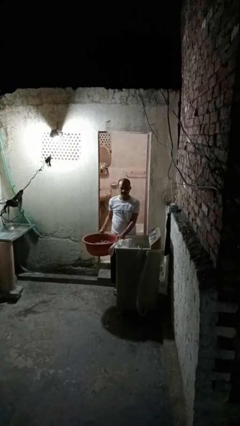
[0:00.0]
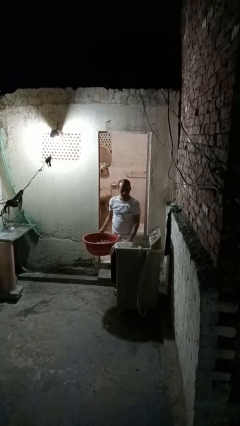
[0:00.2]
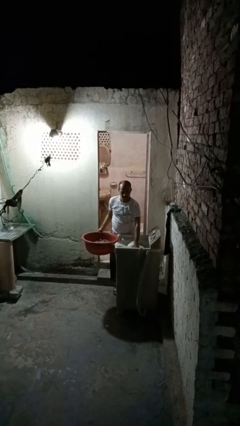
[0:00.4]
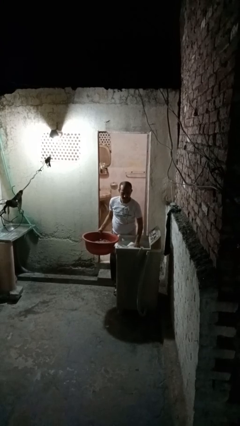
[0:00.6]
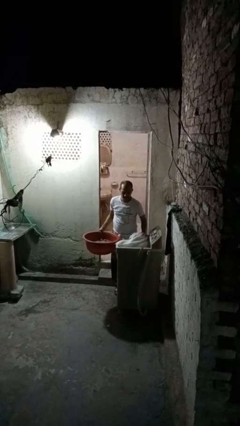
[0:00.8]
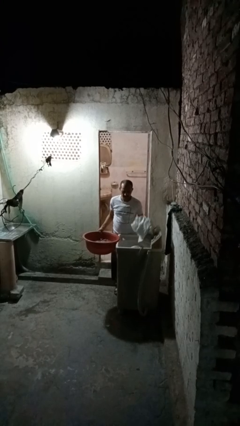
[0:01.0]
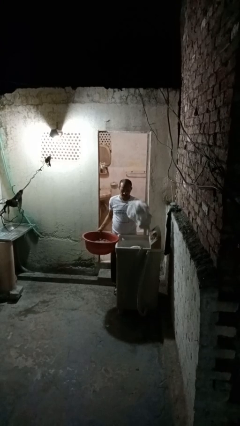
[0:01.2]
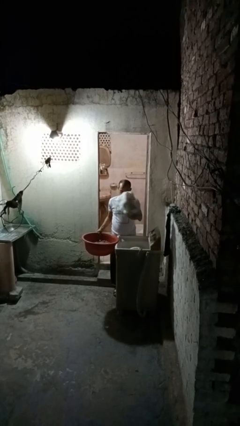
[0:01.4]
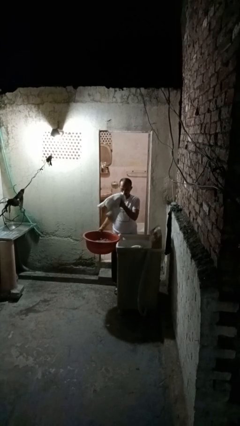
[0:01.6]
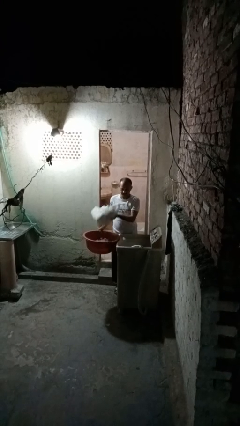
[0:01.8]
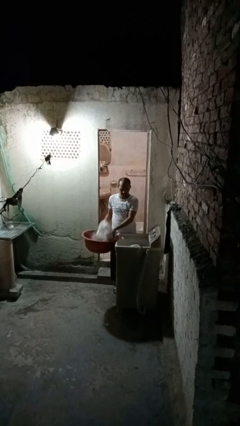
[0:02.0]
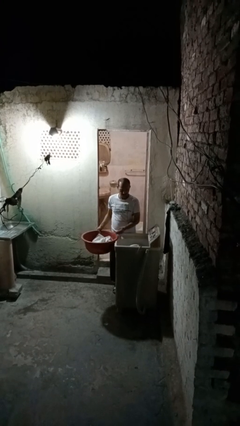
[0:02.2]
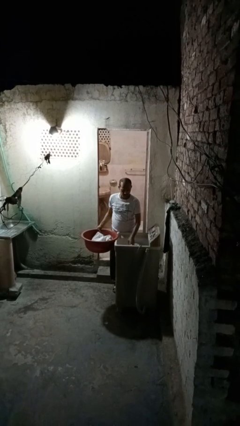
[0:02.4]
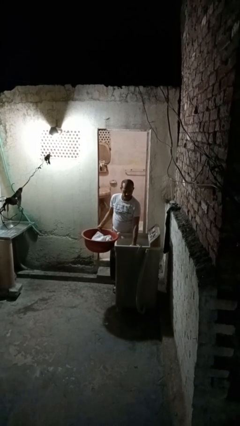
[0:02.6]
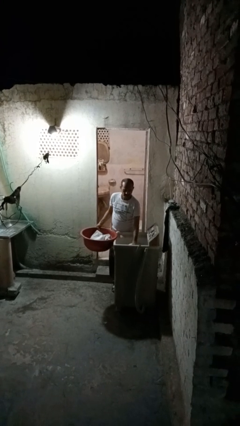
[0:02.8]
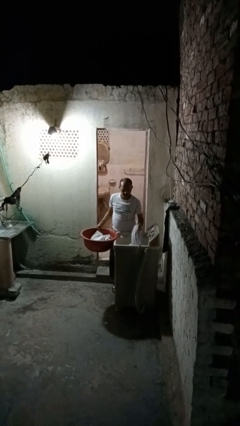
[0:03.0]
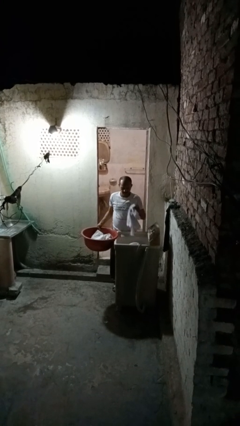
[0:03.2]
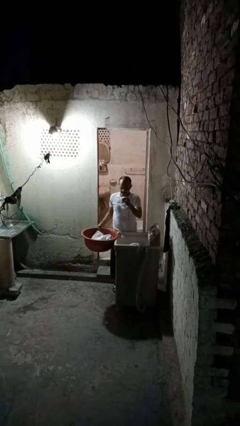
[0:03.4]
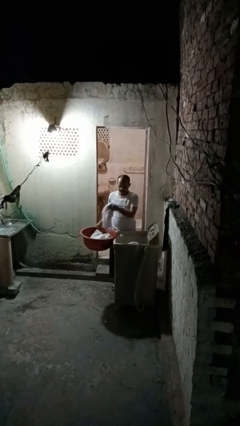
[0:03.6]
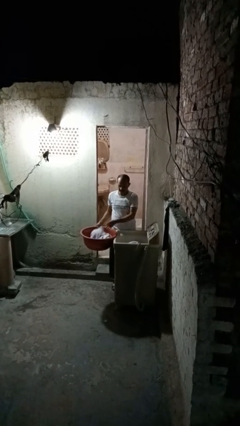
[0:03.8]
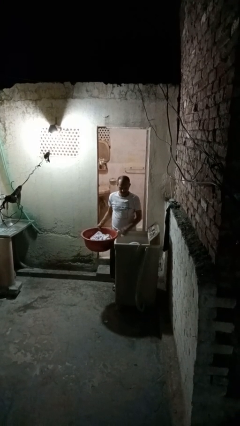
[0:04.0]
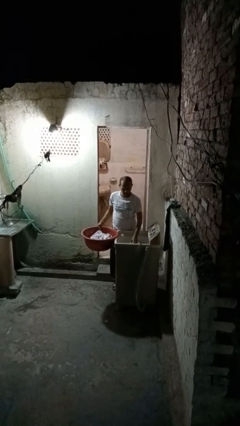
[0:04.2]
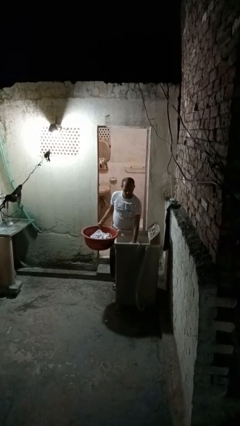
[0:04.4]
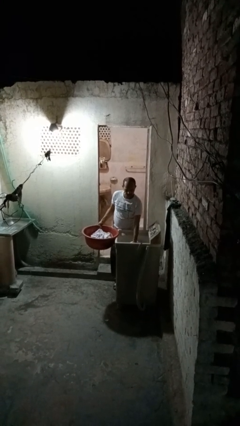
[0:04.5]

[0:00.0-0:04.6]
person unloads clotheswasher

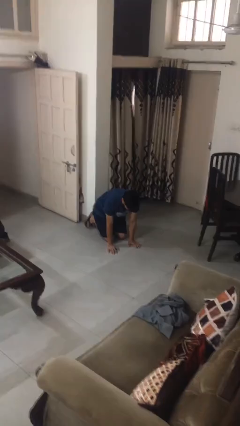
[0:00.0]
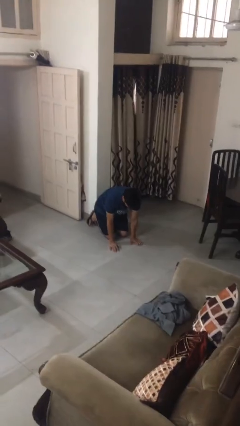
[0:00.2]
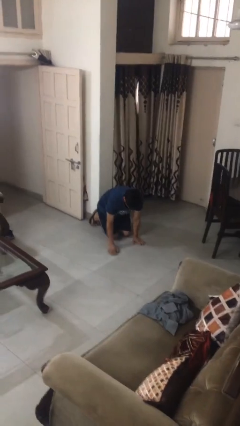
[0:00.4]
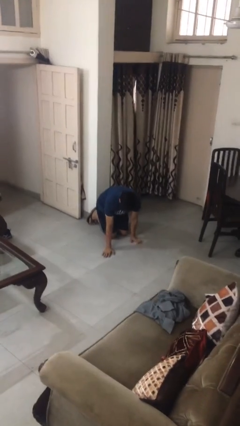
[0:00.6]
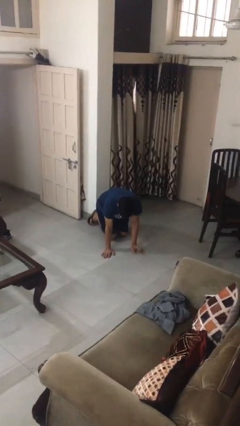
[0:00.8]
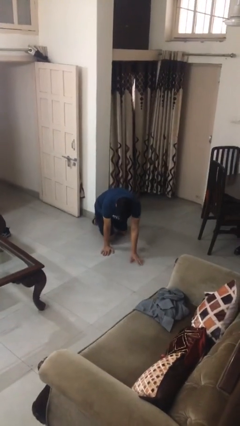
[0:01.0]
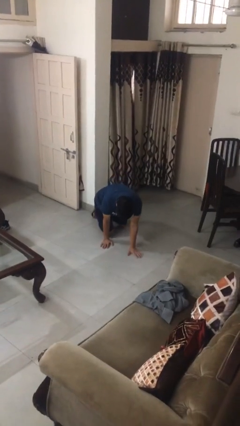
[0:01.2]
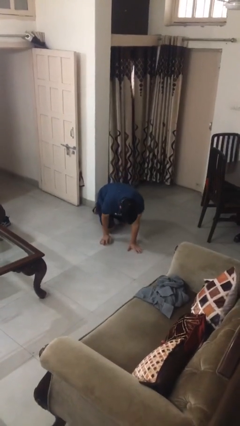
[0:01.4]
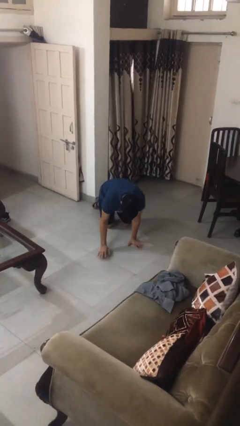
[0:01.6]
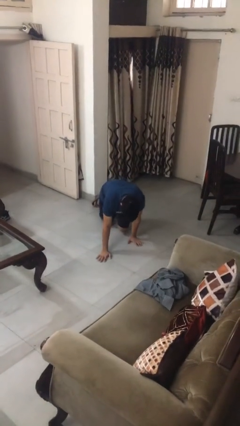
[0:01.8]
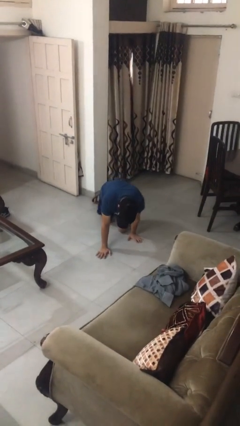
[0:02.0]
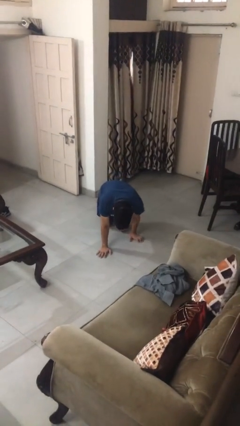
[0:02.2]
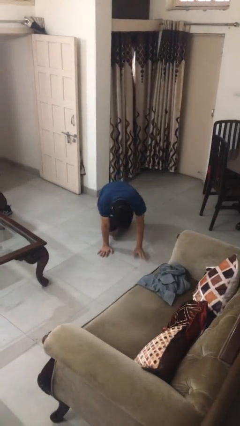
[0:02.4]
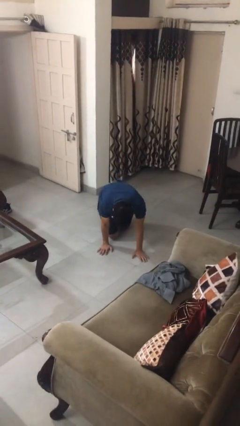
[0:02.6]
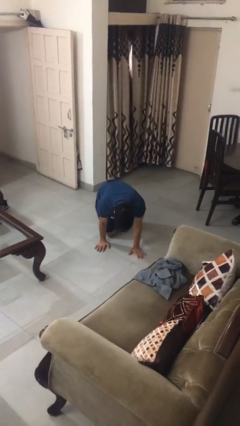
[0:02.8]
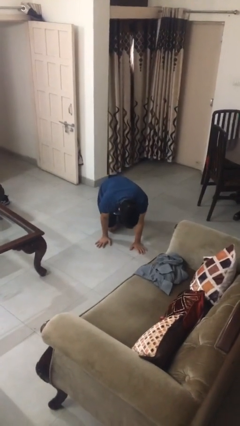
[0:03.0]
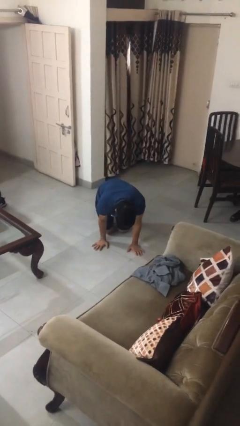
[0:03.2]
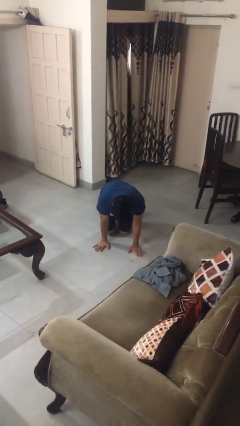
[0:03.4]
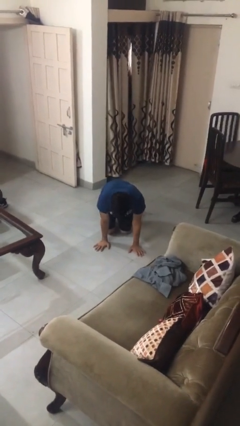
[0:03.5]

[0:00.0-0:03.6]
person crawls

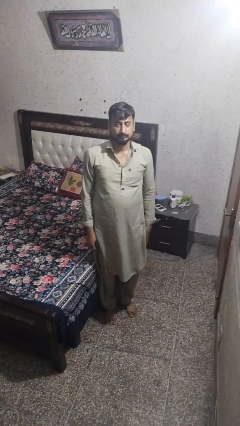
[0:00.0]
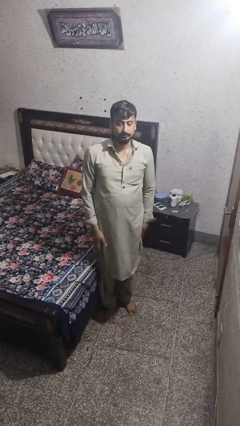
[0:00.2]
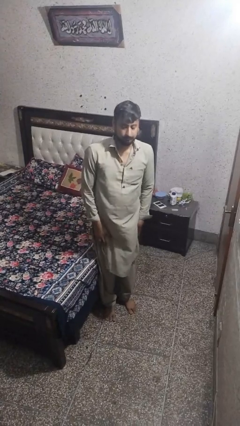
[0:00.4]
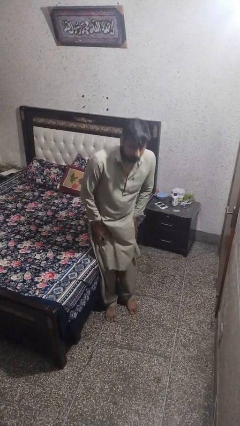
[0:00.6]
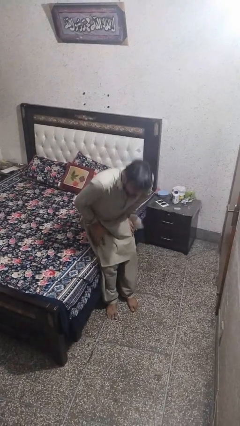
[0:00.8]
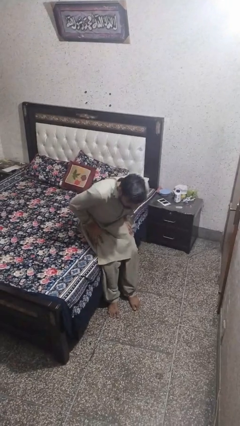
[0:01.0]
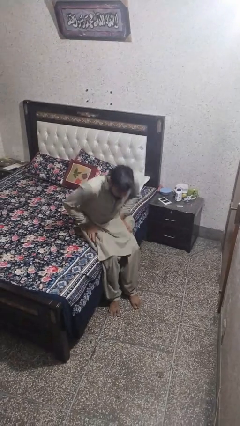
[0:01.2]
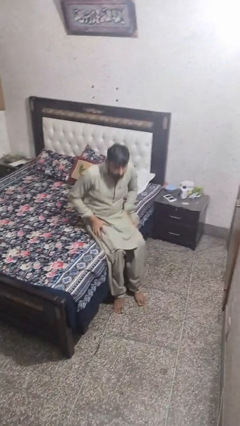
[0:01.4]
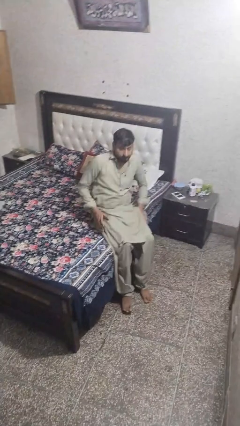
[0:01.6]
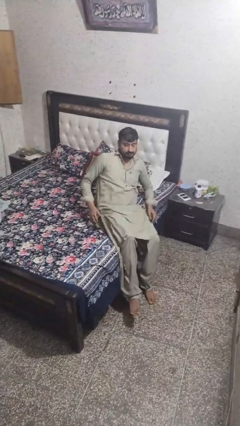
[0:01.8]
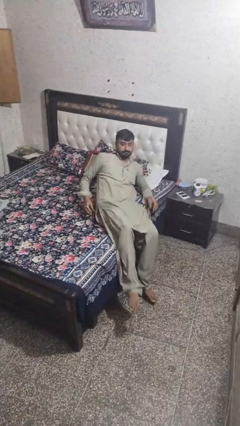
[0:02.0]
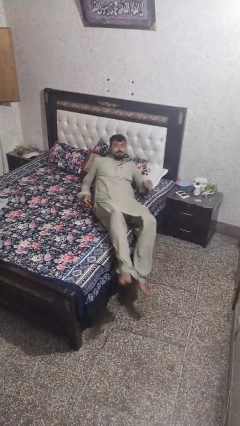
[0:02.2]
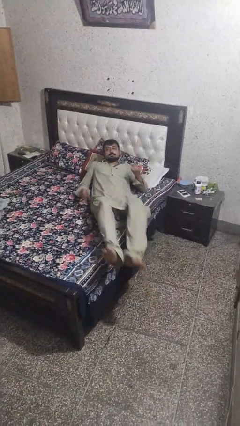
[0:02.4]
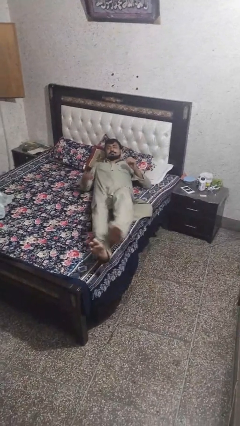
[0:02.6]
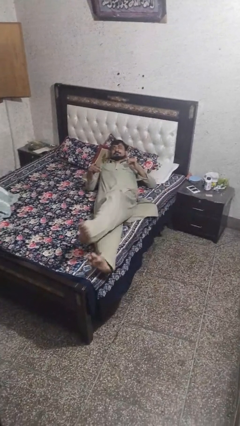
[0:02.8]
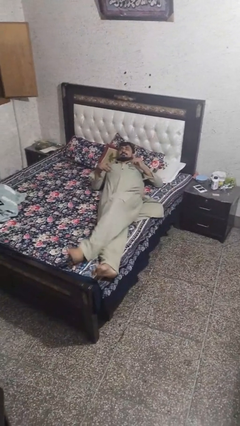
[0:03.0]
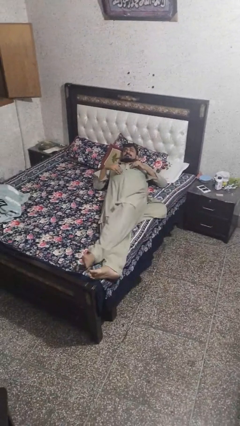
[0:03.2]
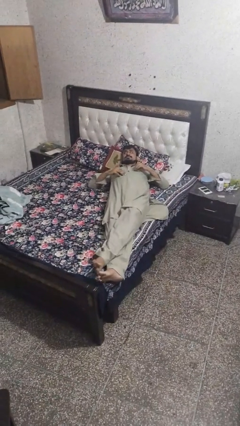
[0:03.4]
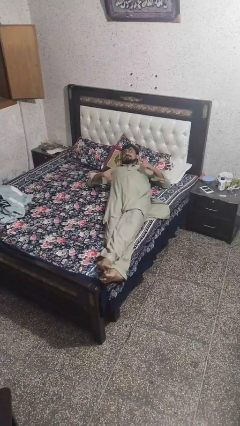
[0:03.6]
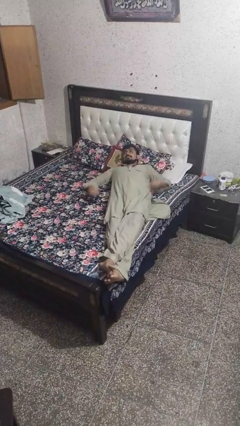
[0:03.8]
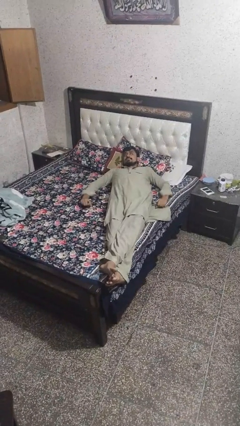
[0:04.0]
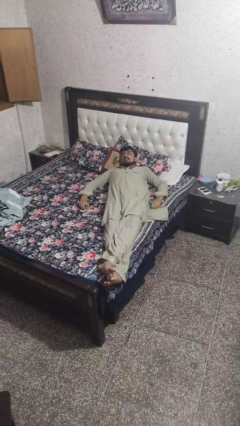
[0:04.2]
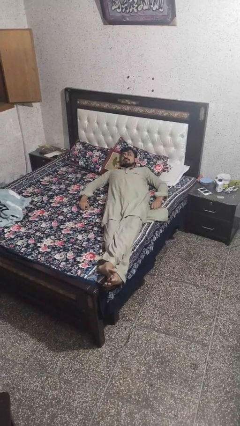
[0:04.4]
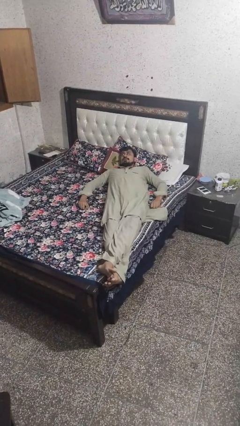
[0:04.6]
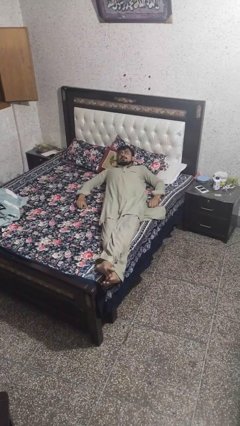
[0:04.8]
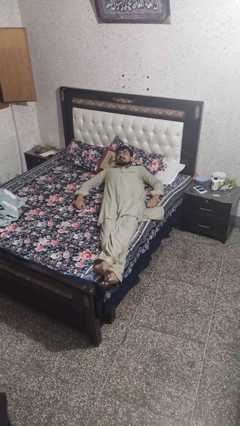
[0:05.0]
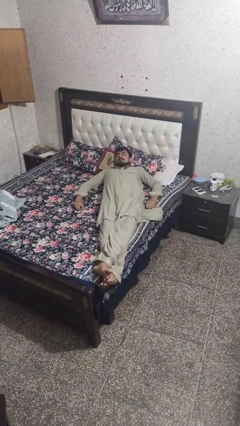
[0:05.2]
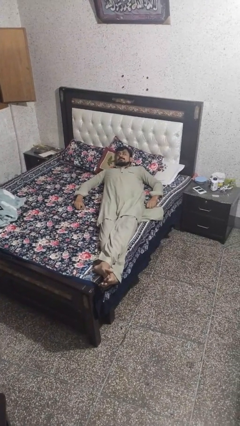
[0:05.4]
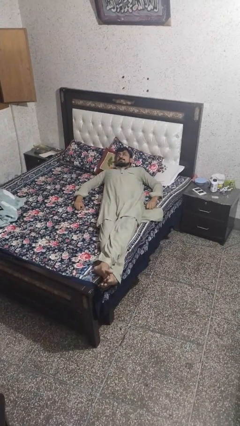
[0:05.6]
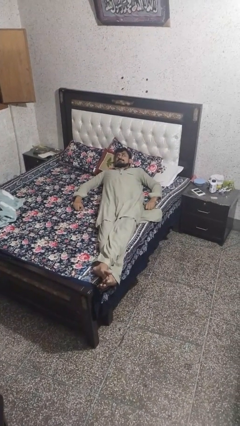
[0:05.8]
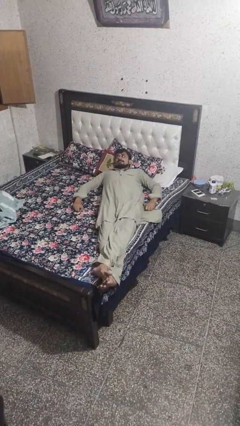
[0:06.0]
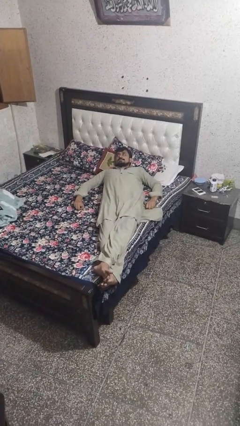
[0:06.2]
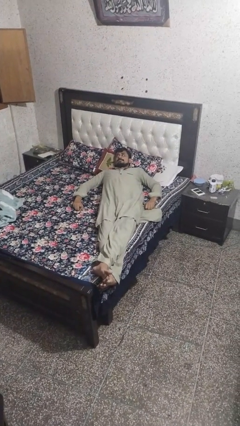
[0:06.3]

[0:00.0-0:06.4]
person lies down on bed

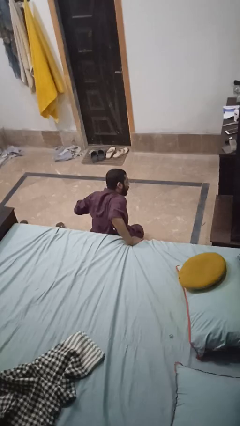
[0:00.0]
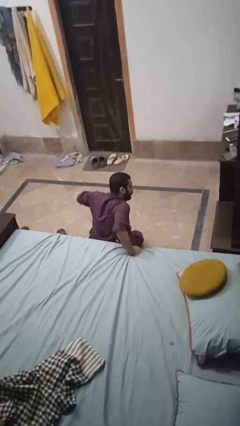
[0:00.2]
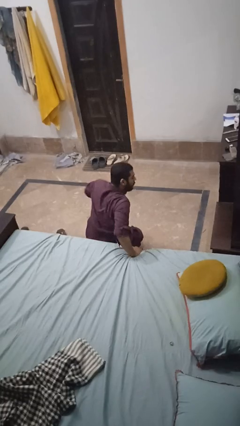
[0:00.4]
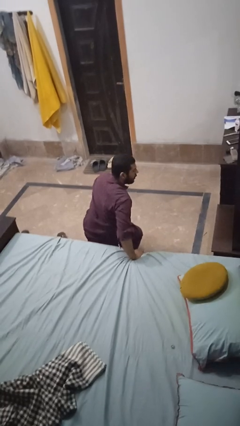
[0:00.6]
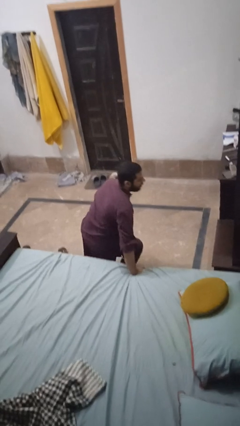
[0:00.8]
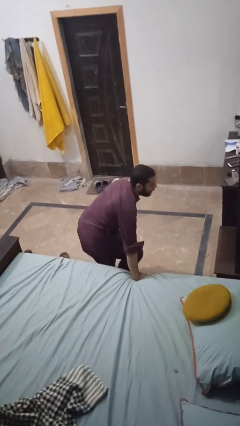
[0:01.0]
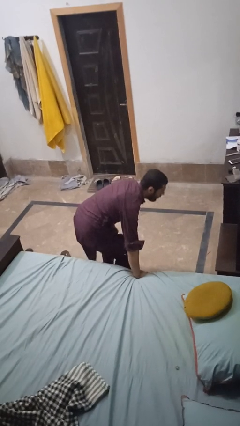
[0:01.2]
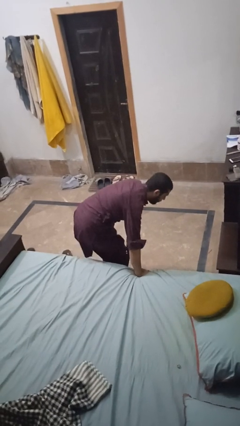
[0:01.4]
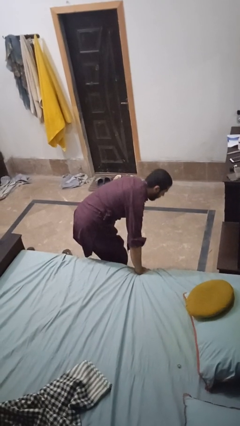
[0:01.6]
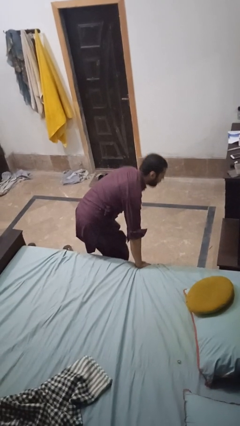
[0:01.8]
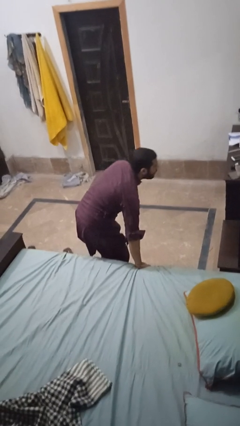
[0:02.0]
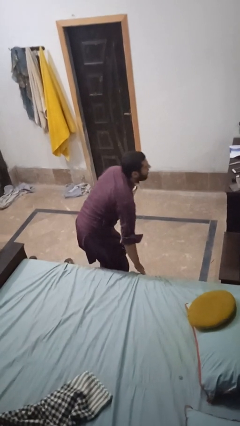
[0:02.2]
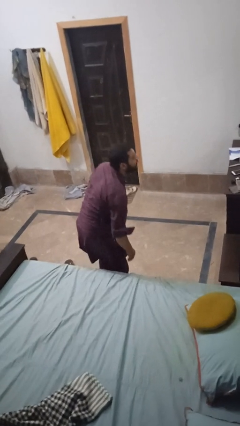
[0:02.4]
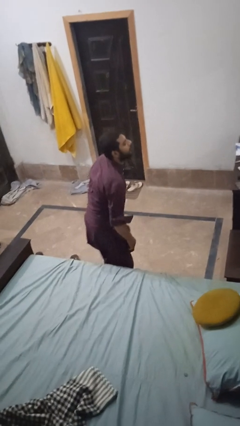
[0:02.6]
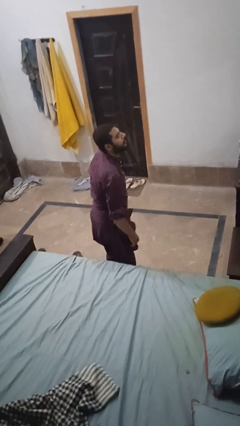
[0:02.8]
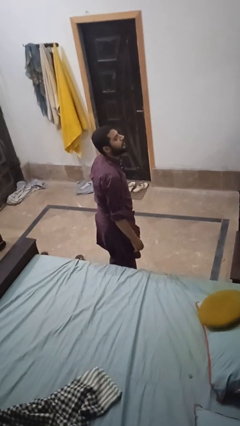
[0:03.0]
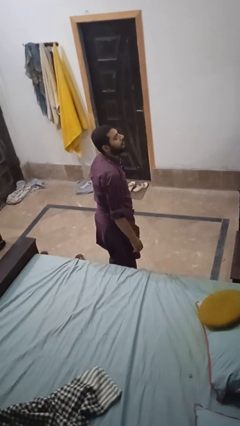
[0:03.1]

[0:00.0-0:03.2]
person stands up from floor
